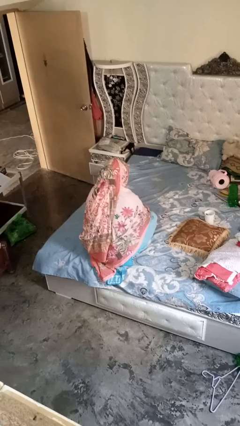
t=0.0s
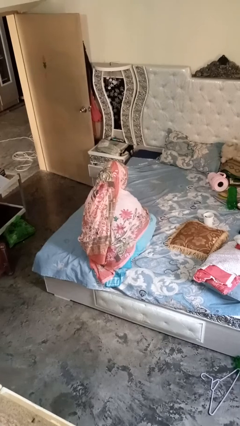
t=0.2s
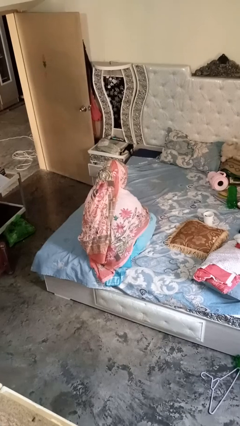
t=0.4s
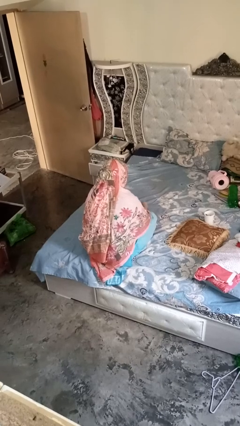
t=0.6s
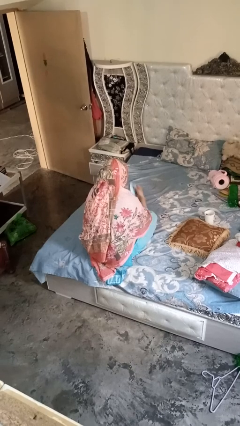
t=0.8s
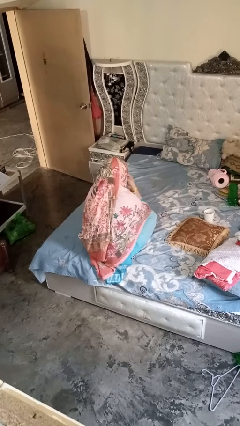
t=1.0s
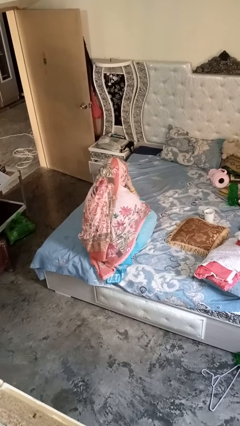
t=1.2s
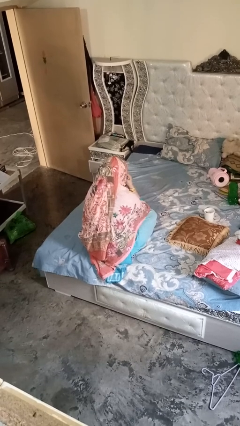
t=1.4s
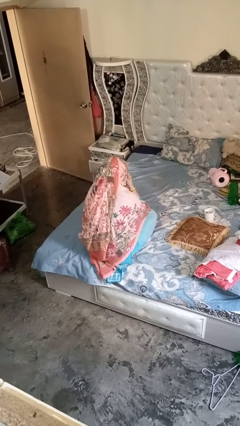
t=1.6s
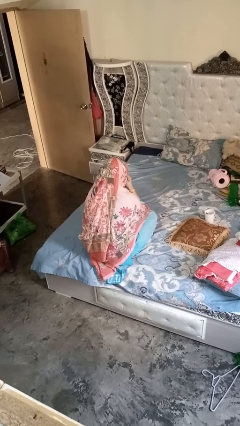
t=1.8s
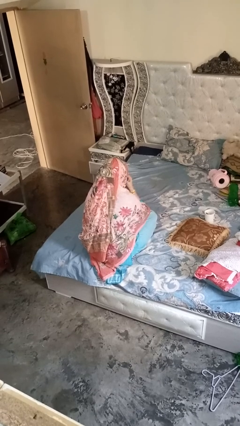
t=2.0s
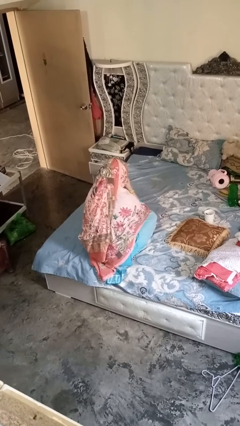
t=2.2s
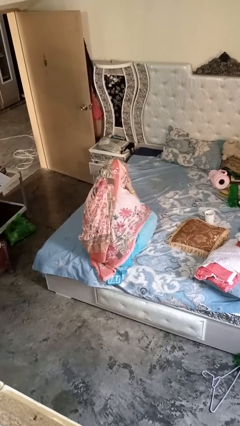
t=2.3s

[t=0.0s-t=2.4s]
person blows nose

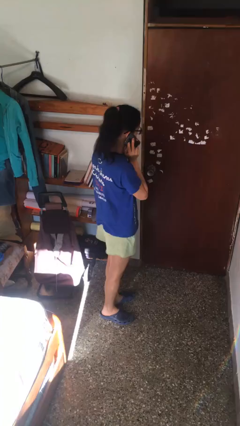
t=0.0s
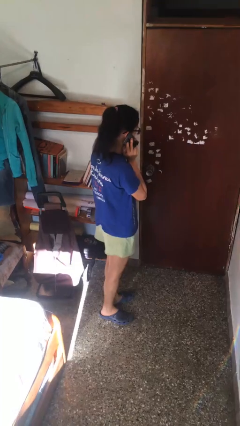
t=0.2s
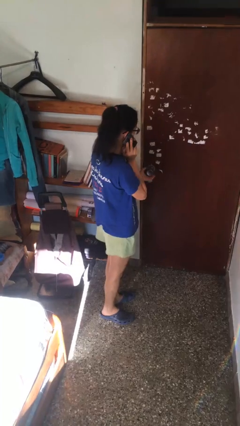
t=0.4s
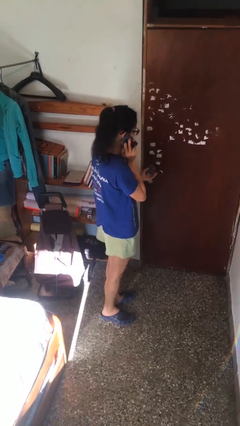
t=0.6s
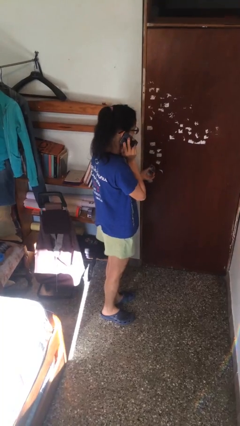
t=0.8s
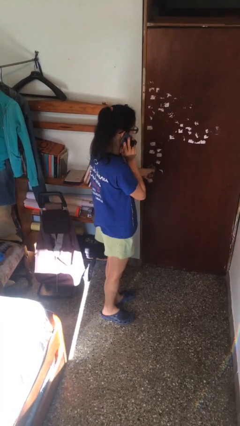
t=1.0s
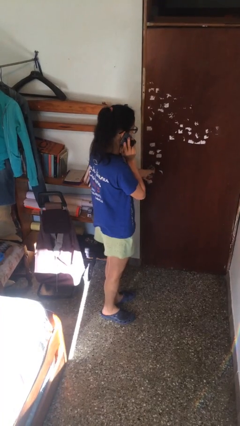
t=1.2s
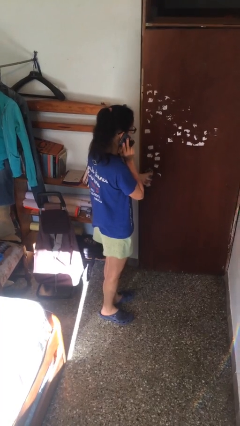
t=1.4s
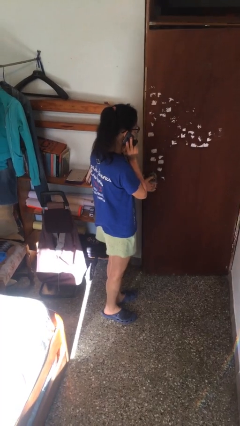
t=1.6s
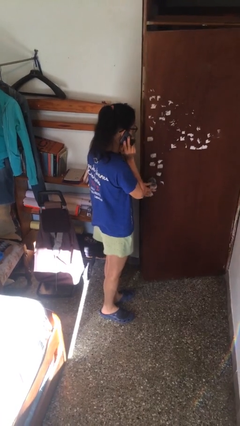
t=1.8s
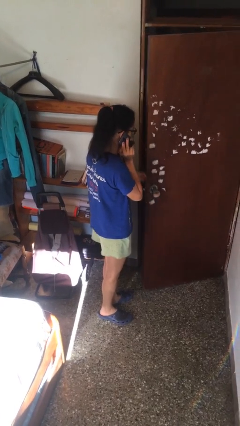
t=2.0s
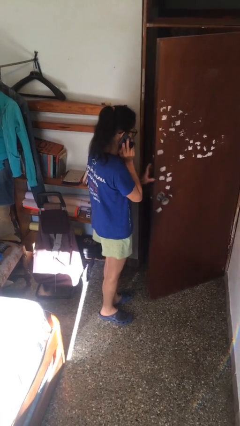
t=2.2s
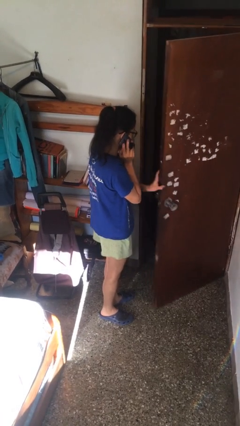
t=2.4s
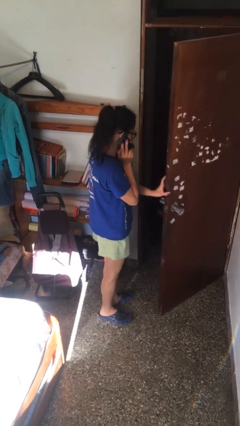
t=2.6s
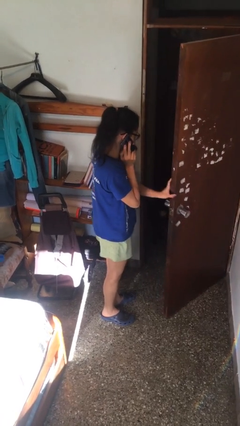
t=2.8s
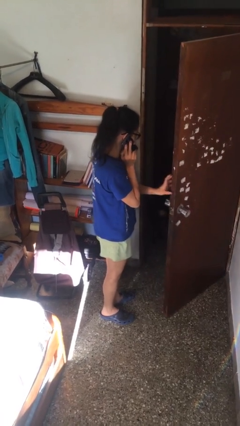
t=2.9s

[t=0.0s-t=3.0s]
person opens facility door

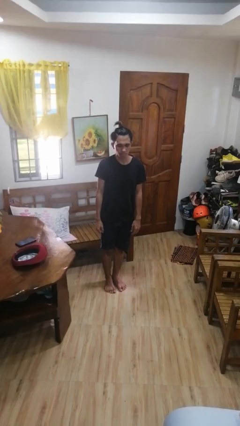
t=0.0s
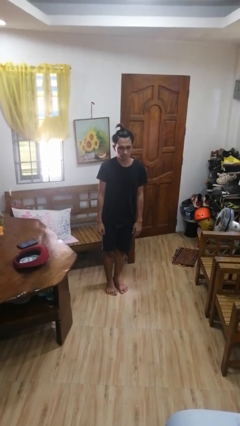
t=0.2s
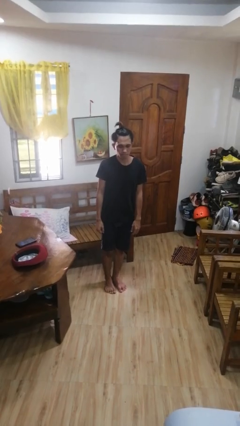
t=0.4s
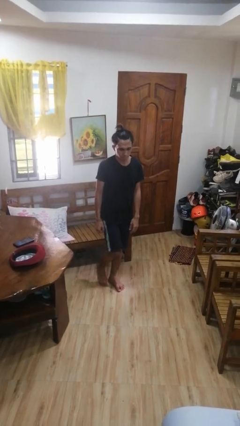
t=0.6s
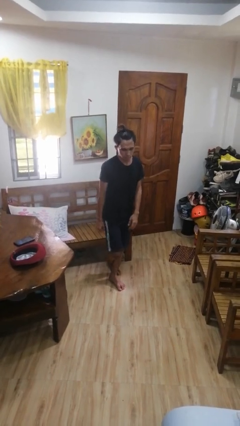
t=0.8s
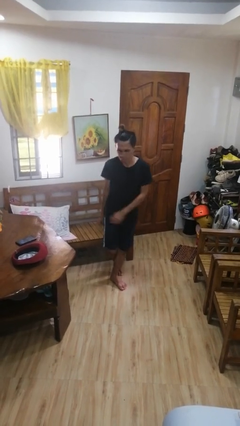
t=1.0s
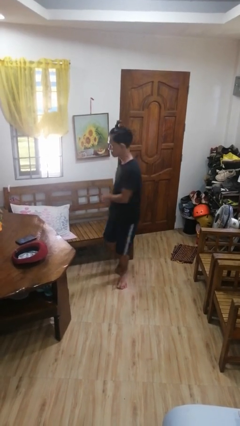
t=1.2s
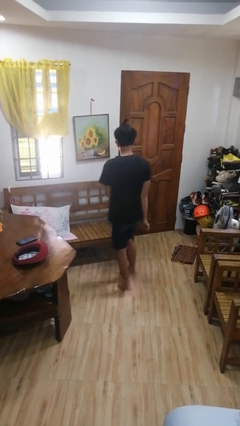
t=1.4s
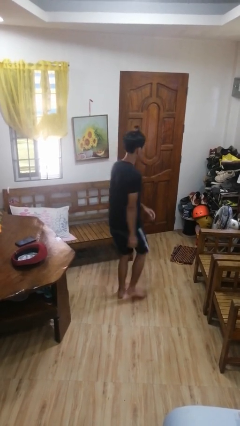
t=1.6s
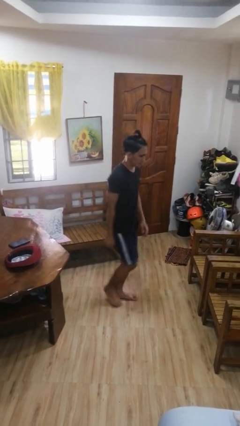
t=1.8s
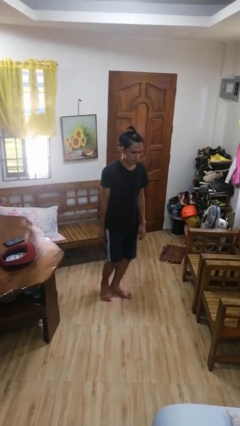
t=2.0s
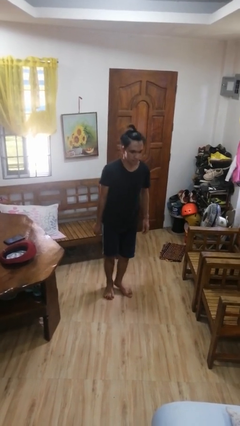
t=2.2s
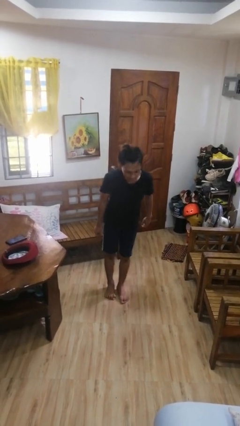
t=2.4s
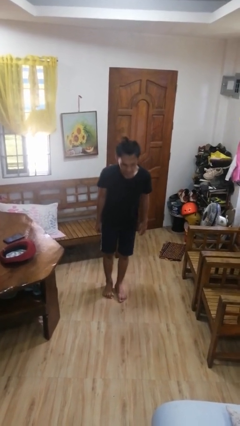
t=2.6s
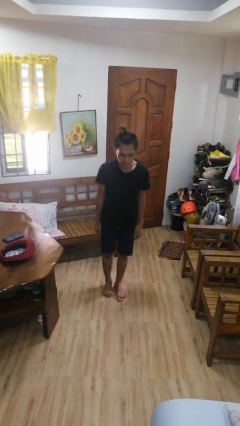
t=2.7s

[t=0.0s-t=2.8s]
person twirls

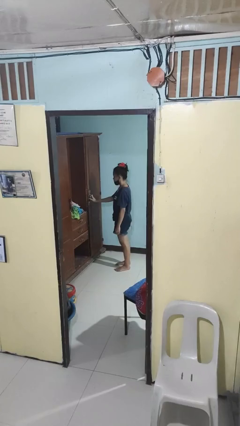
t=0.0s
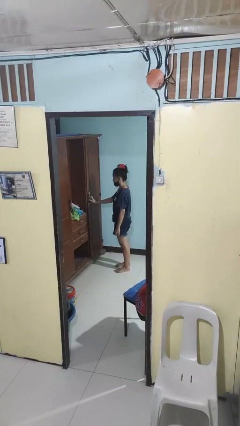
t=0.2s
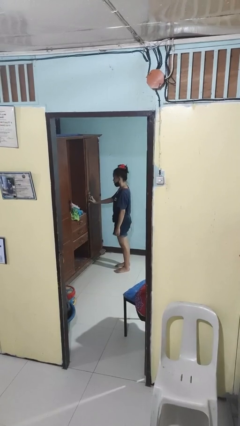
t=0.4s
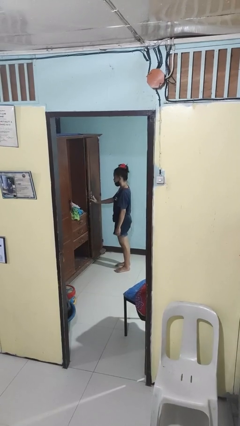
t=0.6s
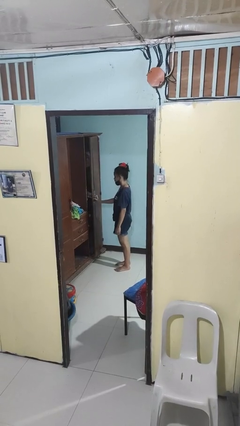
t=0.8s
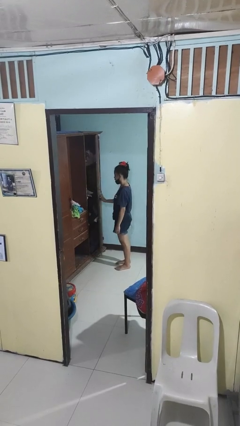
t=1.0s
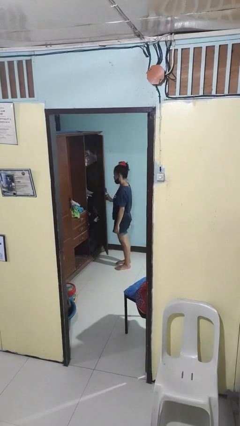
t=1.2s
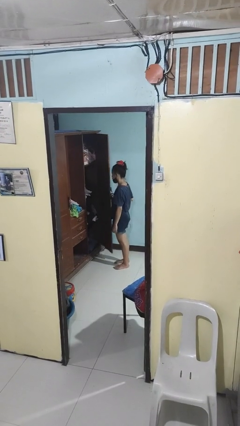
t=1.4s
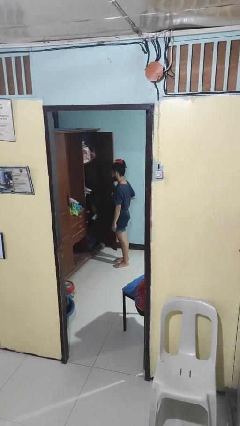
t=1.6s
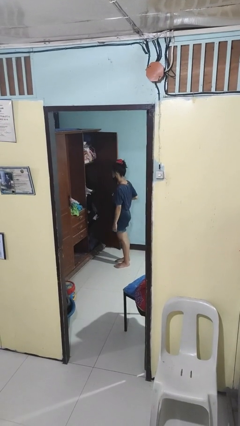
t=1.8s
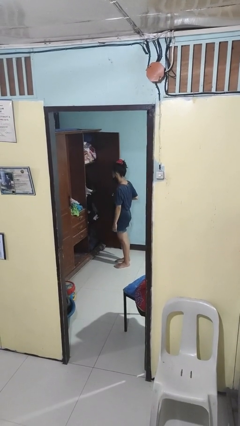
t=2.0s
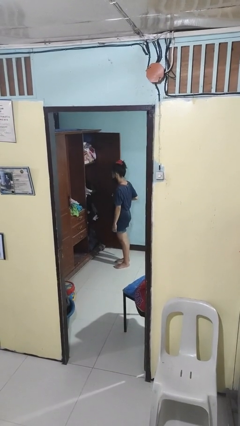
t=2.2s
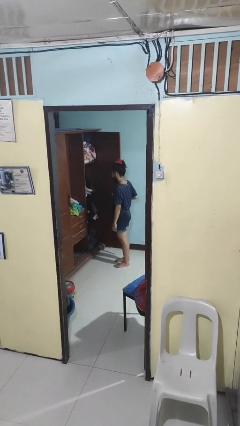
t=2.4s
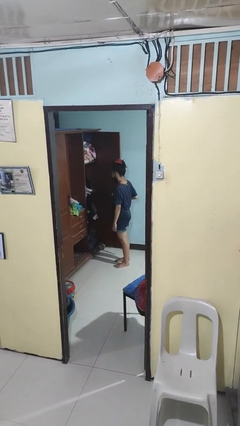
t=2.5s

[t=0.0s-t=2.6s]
person opens closet door

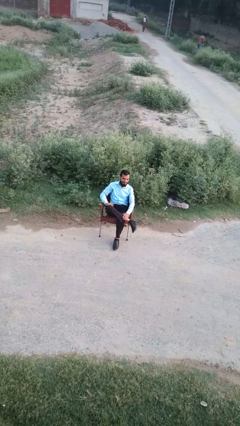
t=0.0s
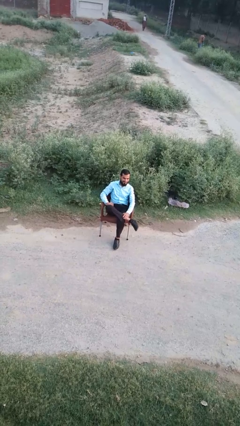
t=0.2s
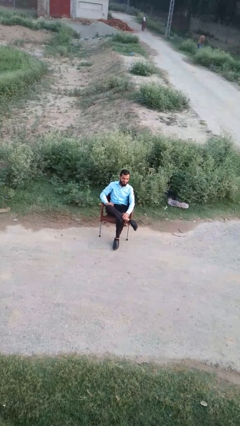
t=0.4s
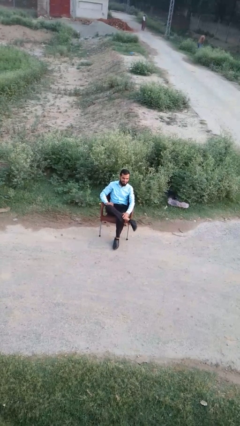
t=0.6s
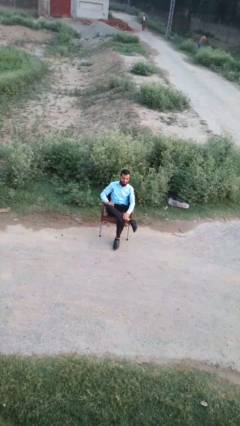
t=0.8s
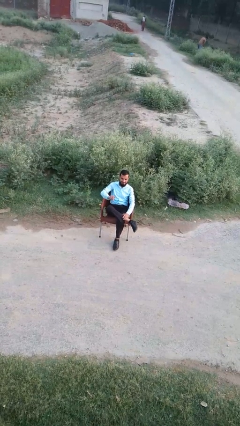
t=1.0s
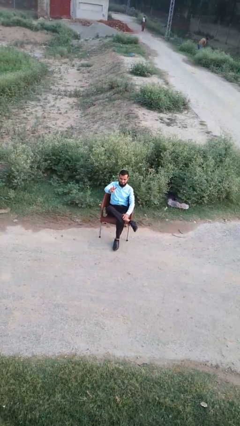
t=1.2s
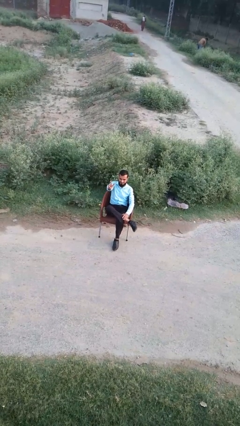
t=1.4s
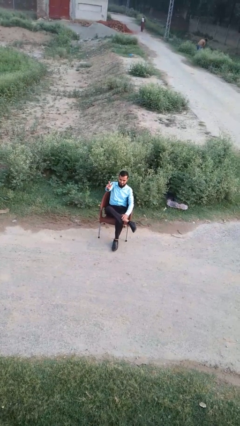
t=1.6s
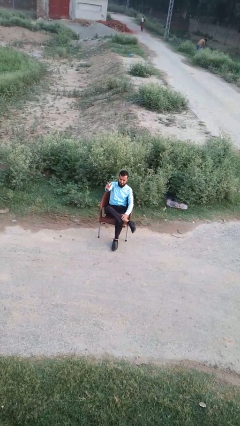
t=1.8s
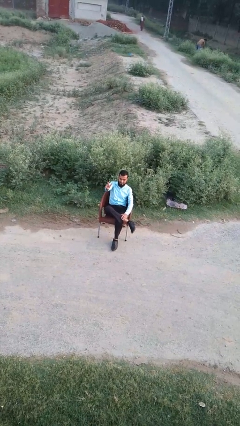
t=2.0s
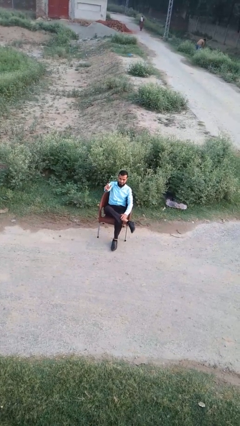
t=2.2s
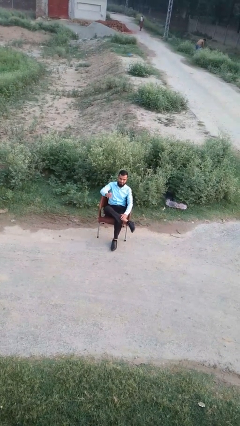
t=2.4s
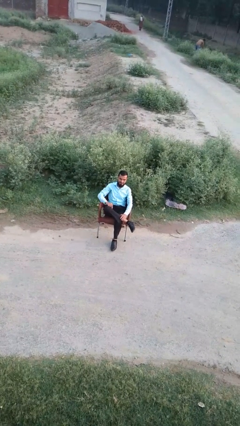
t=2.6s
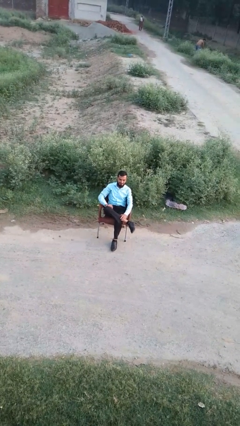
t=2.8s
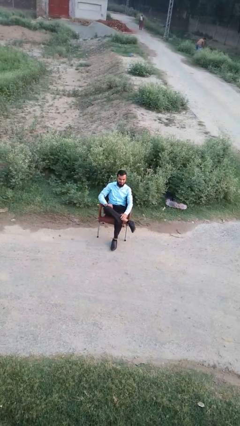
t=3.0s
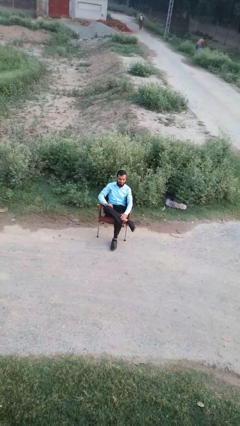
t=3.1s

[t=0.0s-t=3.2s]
person gestures peace

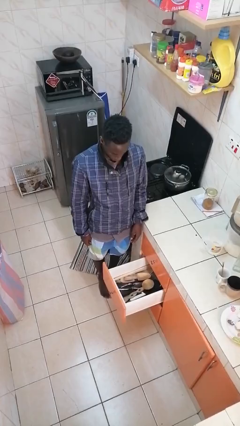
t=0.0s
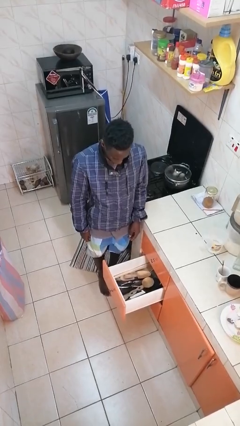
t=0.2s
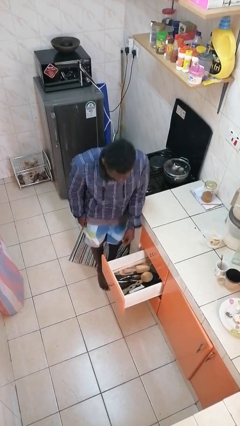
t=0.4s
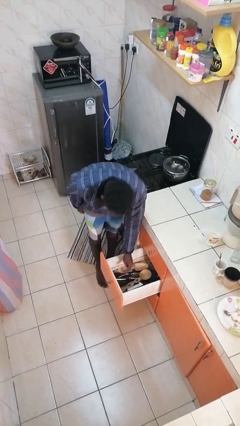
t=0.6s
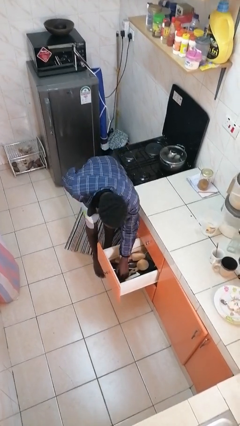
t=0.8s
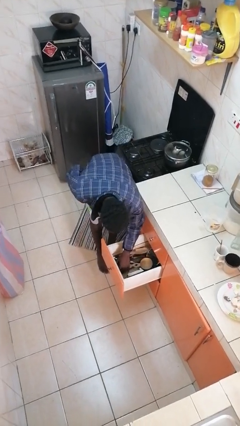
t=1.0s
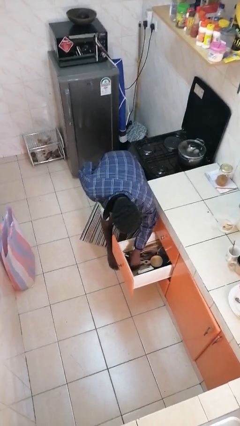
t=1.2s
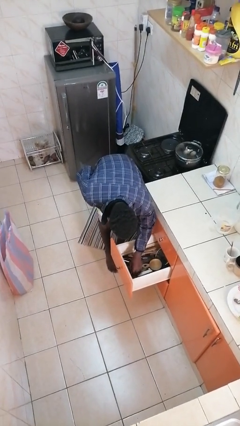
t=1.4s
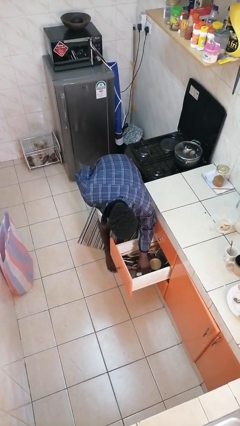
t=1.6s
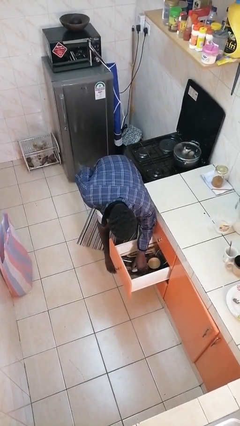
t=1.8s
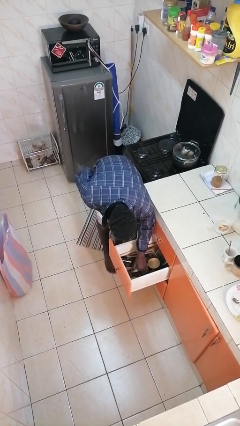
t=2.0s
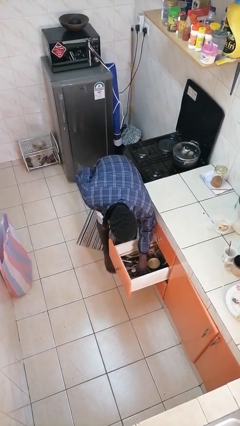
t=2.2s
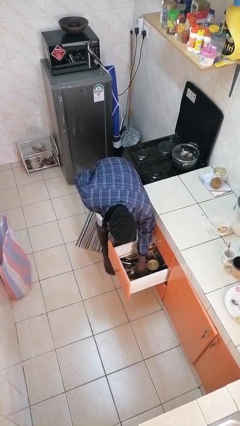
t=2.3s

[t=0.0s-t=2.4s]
person searches in kitchen drawer

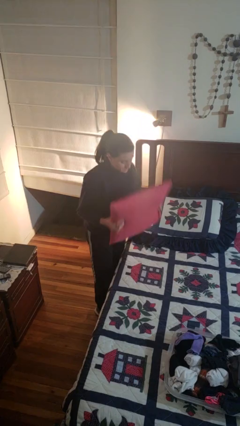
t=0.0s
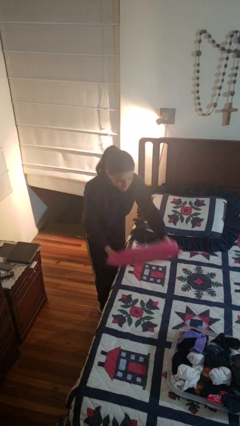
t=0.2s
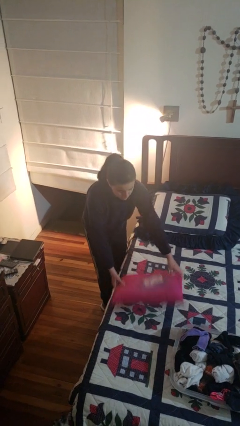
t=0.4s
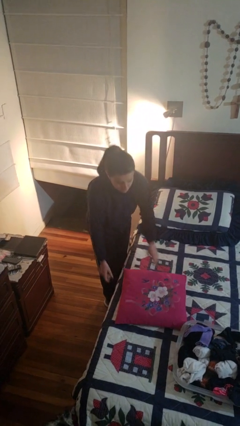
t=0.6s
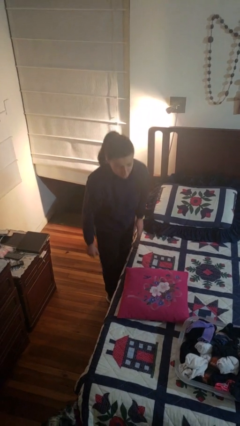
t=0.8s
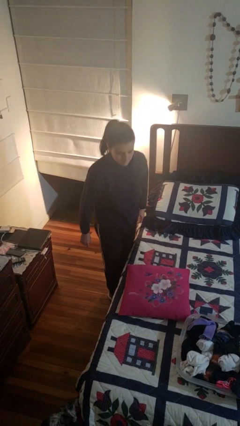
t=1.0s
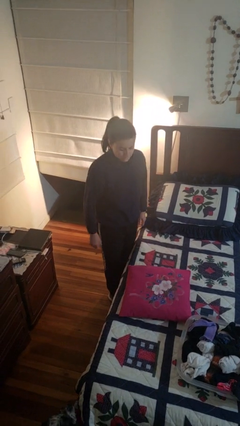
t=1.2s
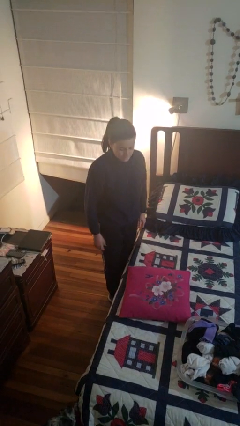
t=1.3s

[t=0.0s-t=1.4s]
person puts down object on bed
